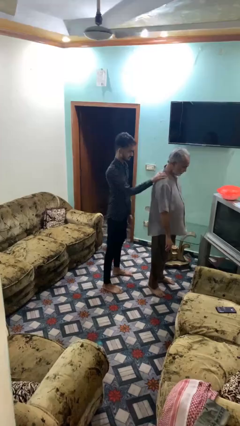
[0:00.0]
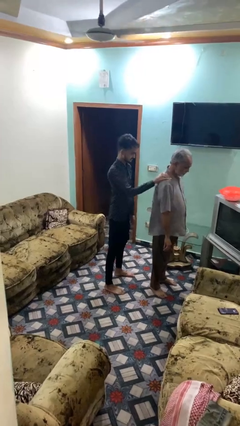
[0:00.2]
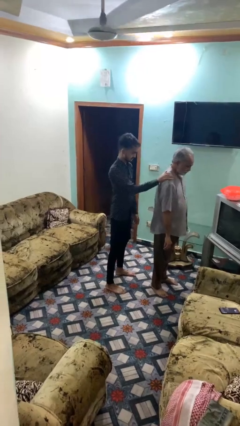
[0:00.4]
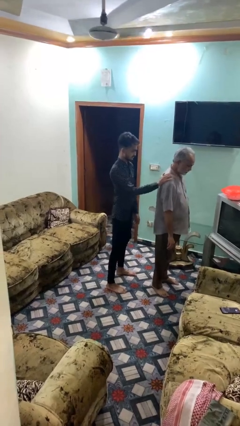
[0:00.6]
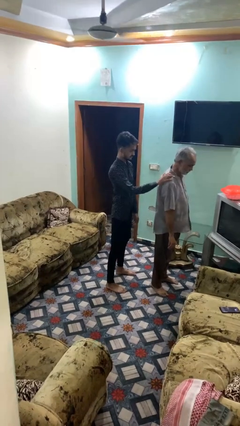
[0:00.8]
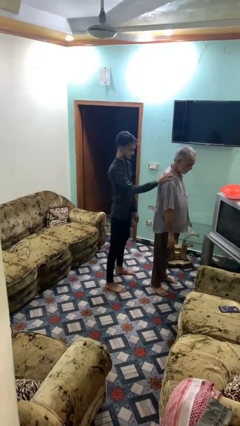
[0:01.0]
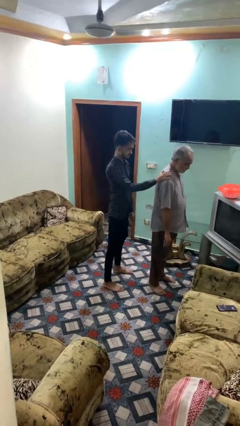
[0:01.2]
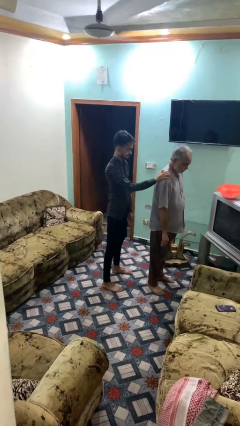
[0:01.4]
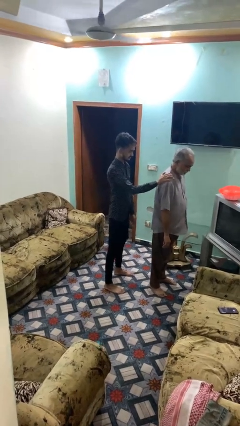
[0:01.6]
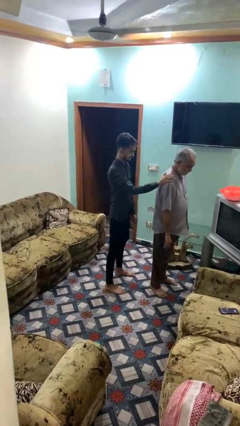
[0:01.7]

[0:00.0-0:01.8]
person grabs person by shoulder

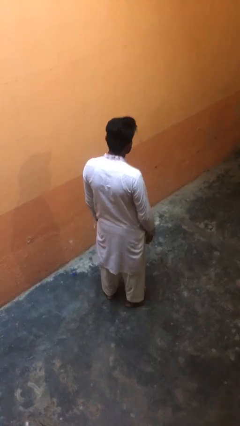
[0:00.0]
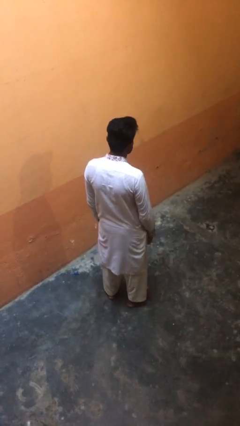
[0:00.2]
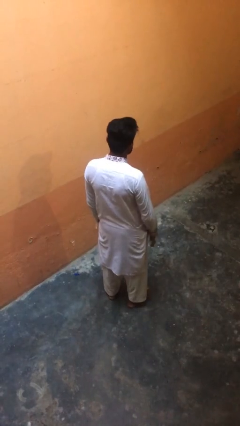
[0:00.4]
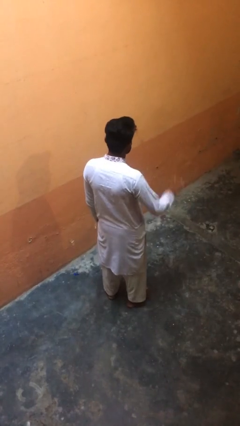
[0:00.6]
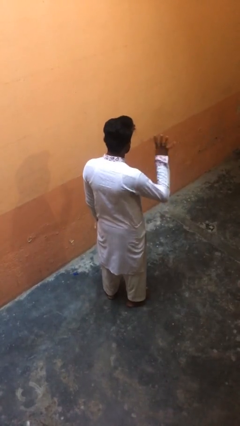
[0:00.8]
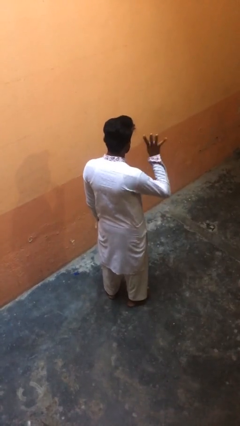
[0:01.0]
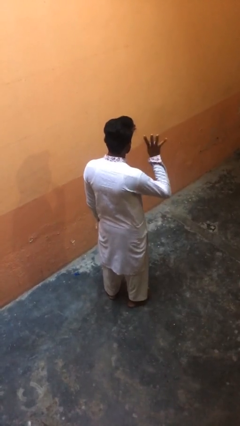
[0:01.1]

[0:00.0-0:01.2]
person gestures number four

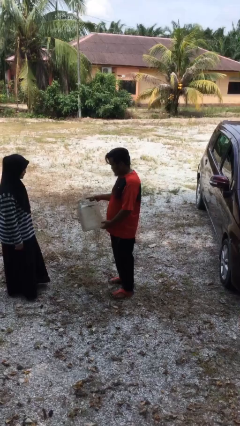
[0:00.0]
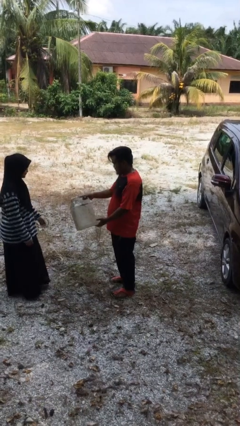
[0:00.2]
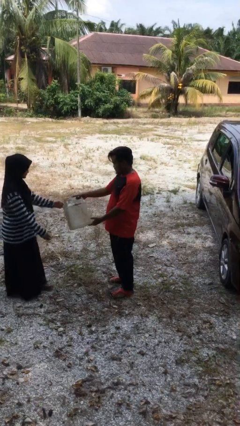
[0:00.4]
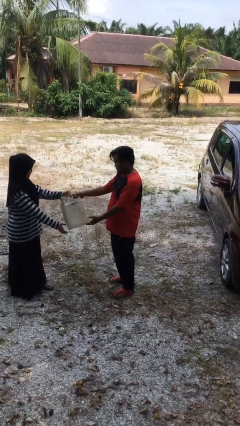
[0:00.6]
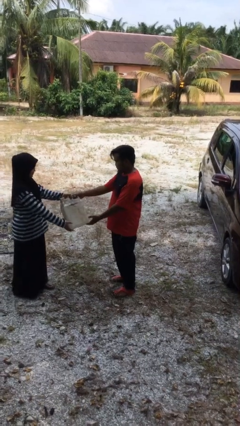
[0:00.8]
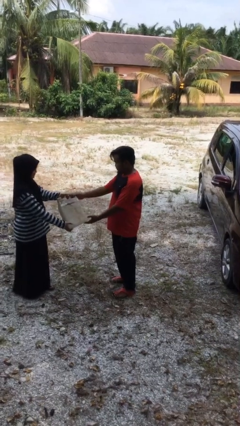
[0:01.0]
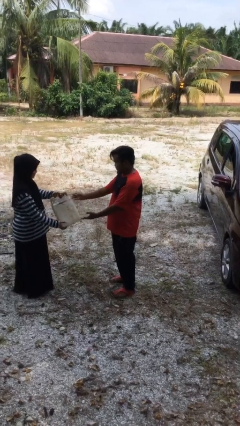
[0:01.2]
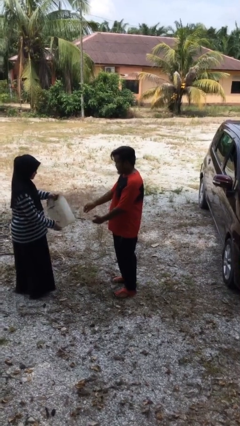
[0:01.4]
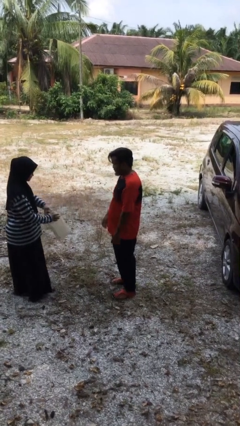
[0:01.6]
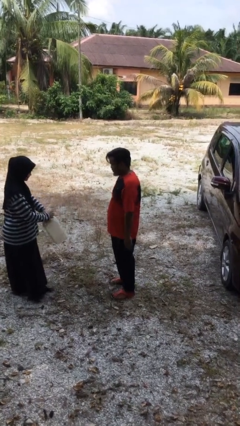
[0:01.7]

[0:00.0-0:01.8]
person transfers object to person

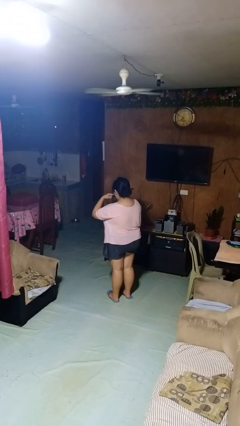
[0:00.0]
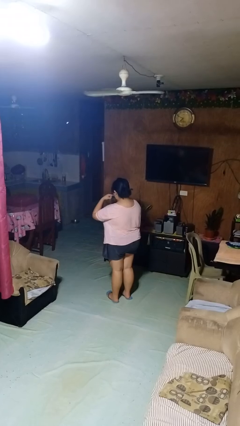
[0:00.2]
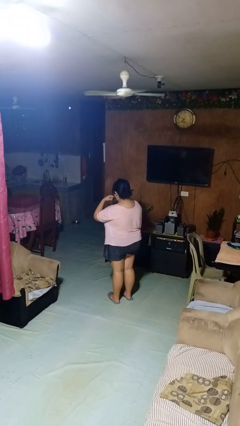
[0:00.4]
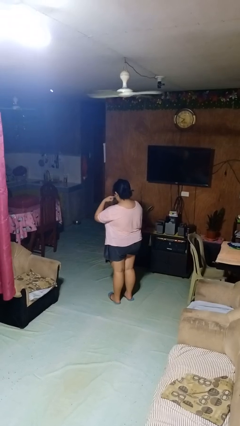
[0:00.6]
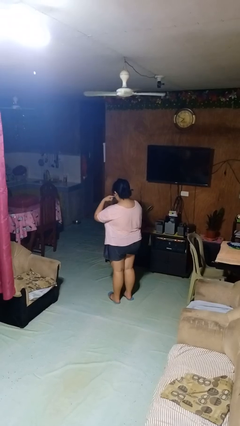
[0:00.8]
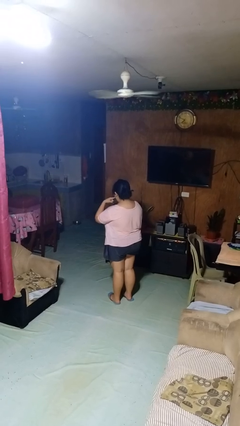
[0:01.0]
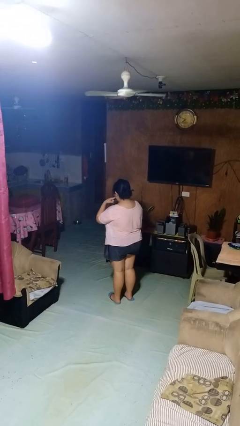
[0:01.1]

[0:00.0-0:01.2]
person licks fingers

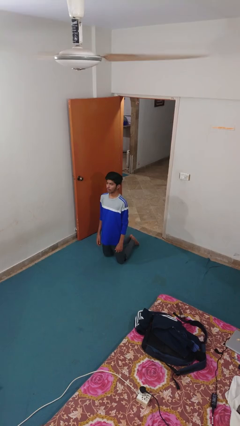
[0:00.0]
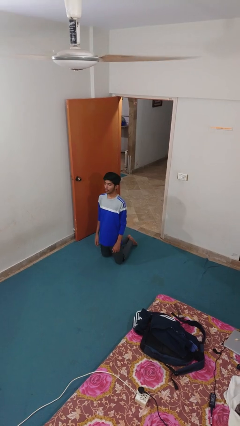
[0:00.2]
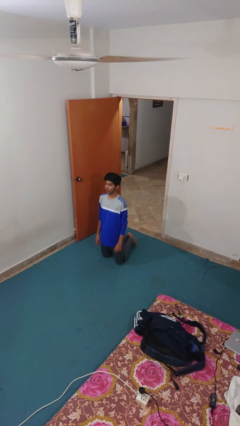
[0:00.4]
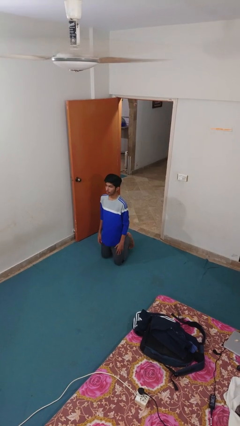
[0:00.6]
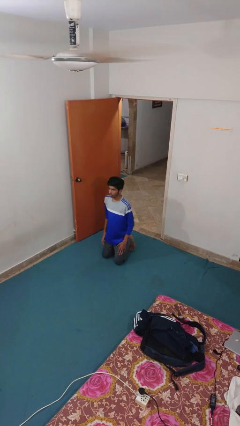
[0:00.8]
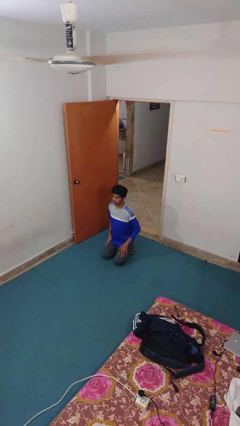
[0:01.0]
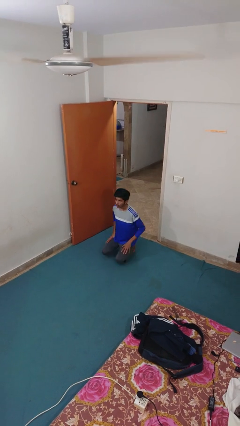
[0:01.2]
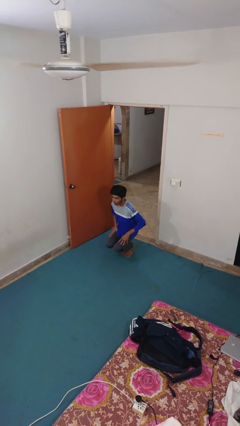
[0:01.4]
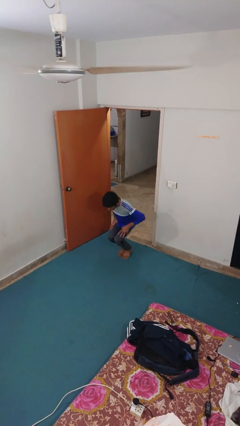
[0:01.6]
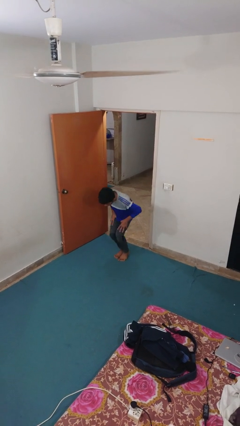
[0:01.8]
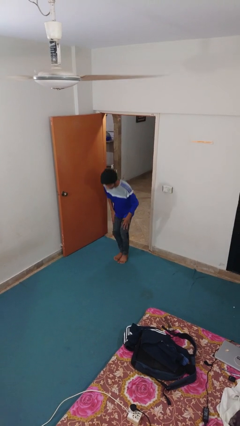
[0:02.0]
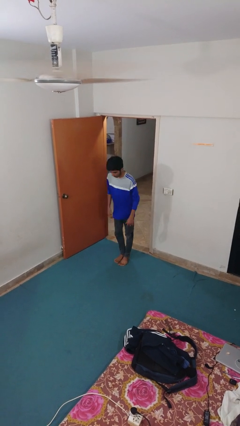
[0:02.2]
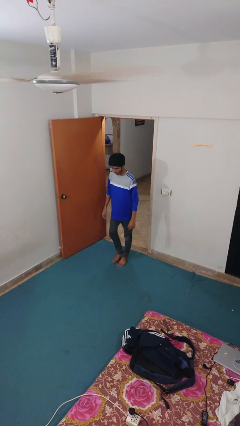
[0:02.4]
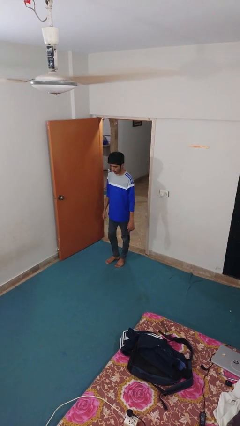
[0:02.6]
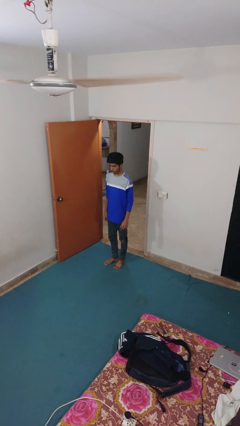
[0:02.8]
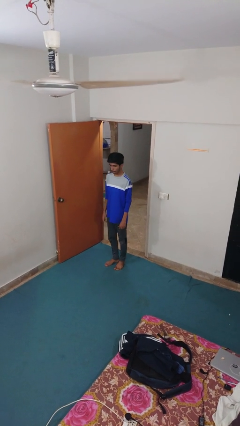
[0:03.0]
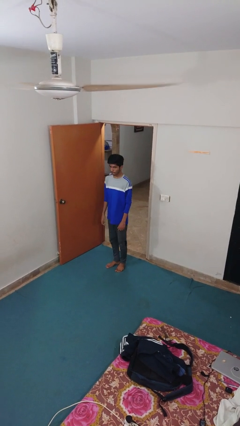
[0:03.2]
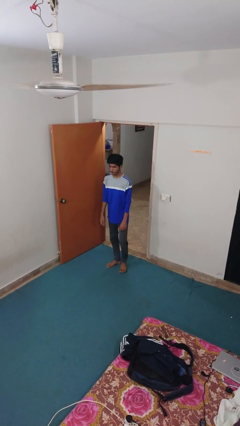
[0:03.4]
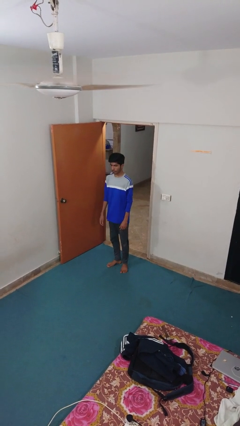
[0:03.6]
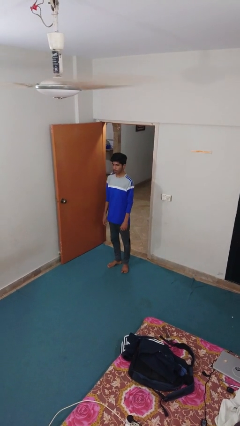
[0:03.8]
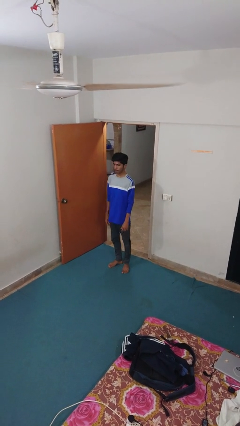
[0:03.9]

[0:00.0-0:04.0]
person stands up from floor

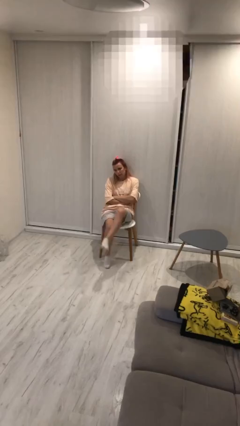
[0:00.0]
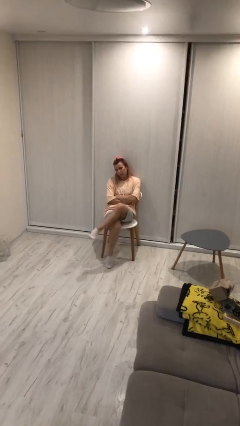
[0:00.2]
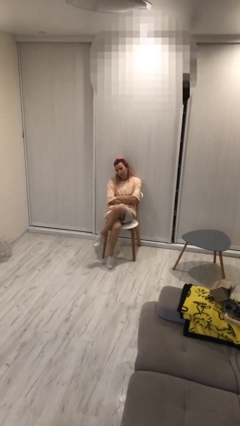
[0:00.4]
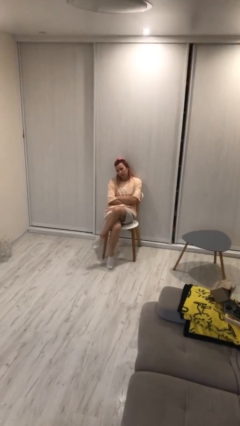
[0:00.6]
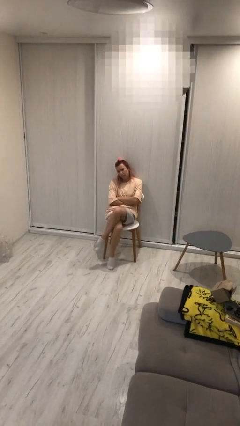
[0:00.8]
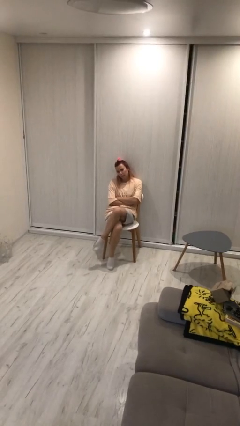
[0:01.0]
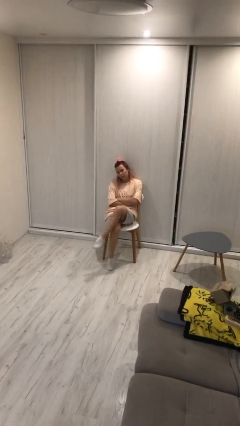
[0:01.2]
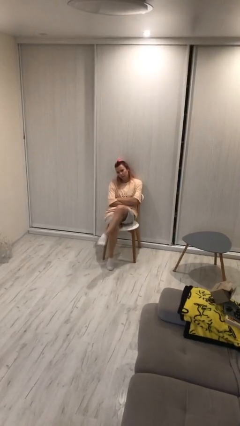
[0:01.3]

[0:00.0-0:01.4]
person crosses legs

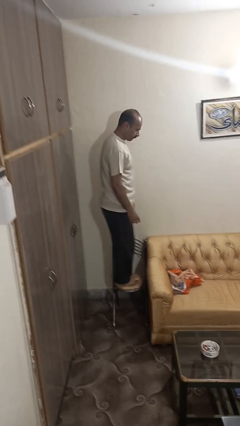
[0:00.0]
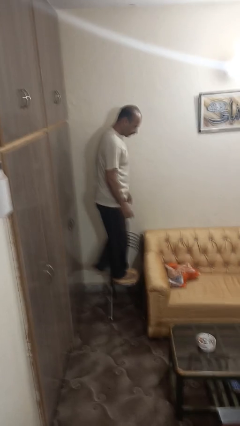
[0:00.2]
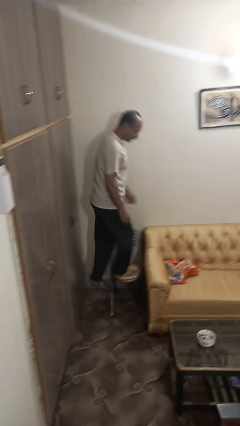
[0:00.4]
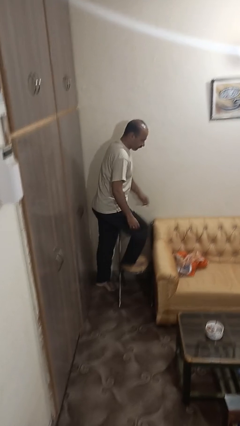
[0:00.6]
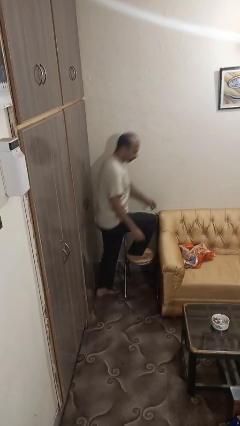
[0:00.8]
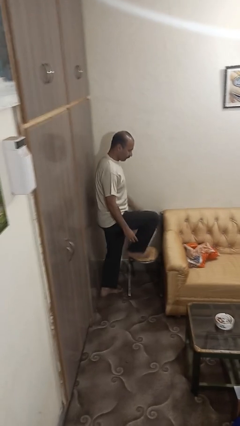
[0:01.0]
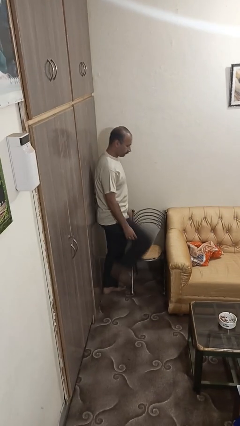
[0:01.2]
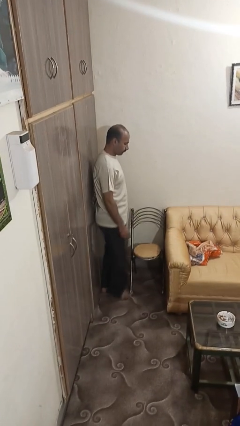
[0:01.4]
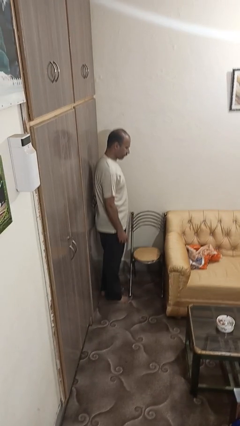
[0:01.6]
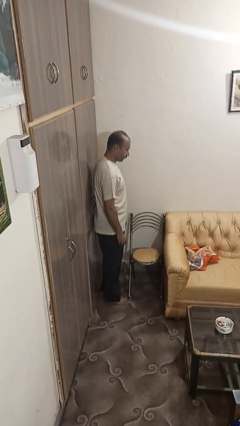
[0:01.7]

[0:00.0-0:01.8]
person climbs off chair

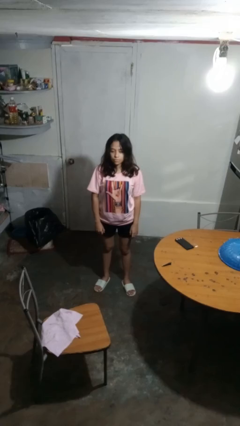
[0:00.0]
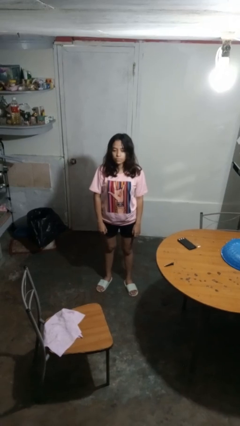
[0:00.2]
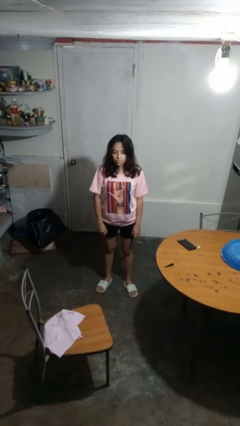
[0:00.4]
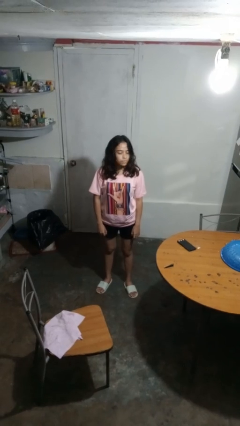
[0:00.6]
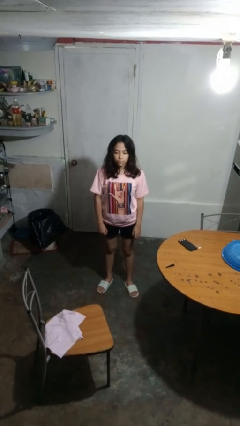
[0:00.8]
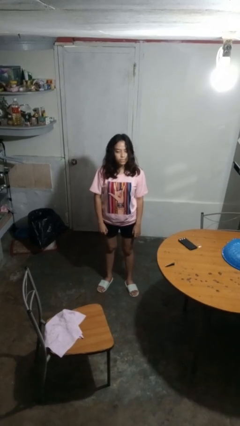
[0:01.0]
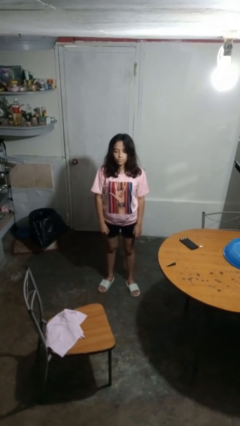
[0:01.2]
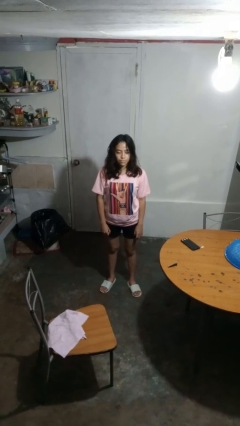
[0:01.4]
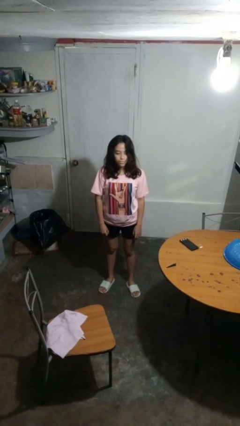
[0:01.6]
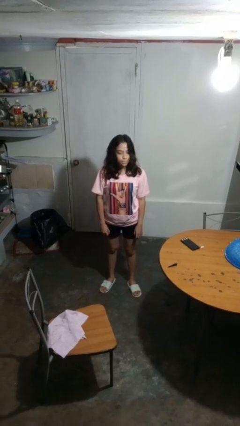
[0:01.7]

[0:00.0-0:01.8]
person shakes head

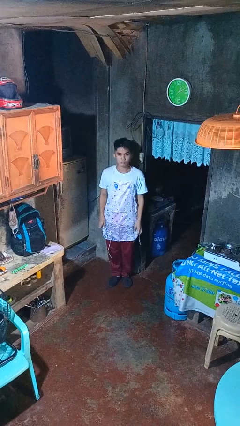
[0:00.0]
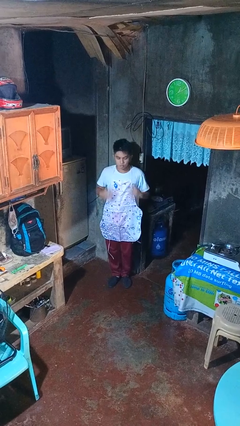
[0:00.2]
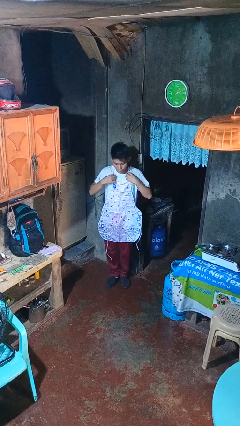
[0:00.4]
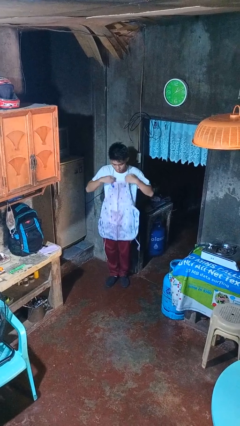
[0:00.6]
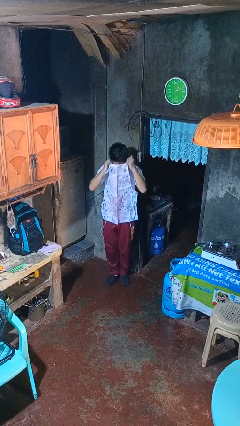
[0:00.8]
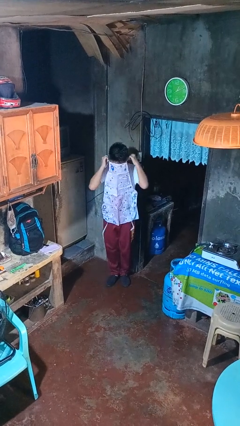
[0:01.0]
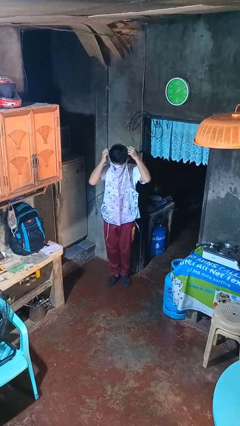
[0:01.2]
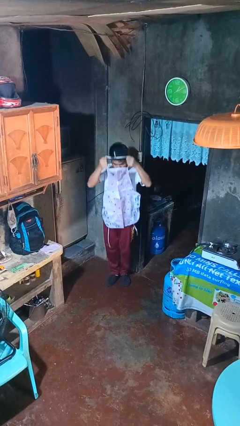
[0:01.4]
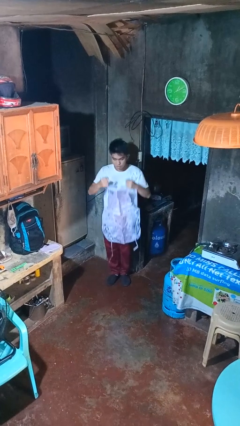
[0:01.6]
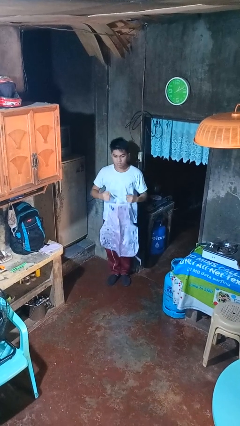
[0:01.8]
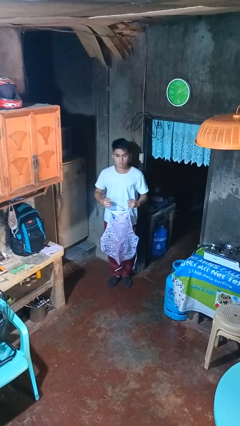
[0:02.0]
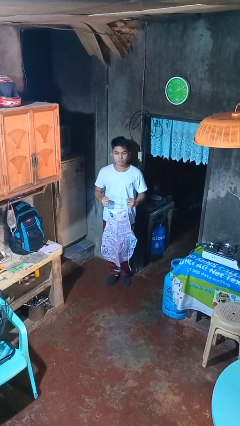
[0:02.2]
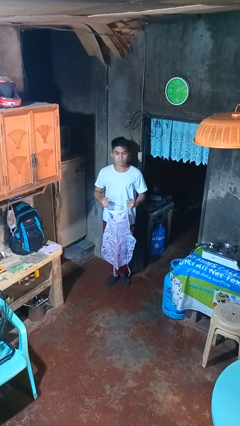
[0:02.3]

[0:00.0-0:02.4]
person takes off apron
